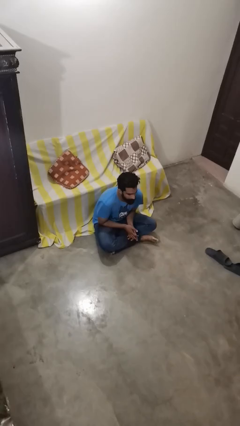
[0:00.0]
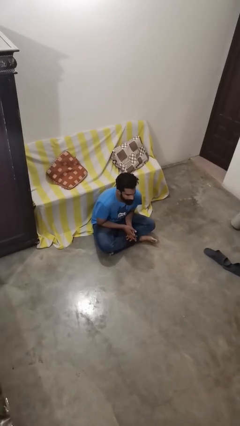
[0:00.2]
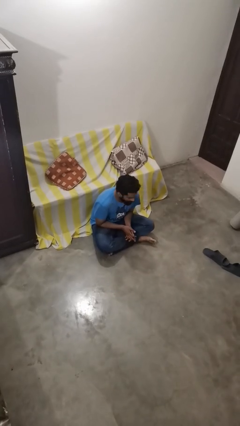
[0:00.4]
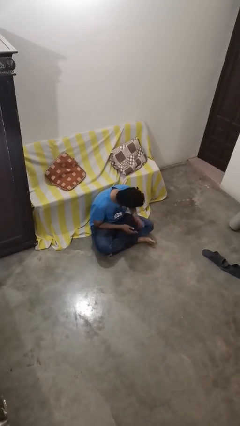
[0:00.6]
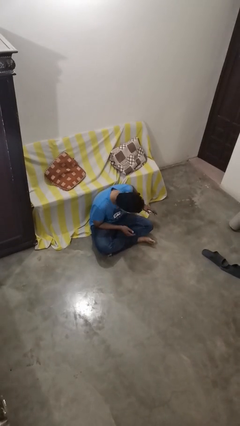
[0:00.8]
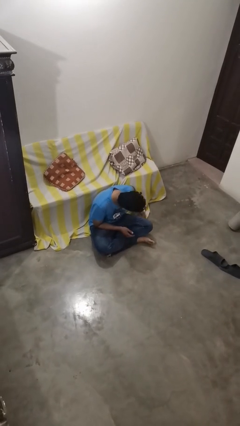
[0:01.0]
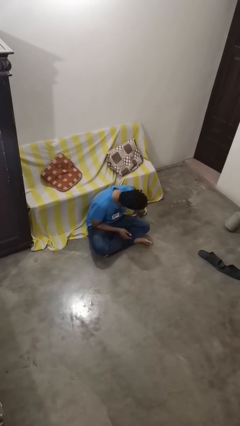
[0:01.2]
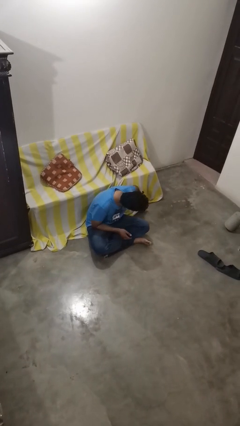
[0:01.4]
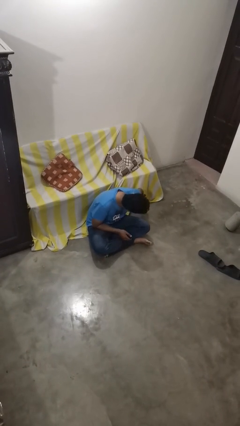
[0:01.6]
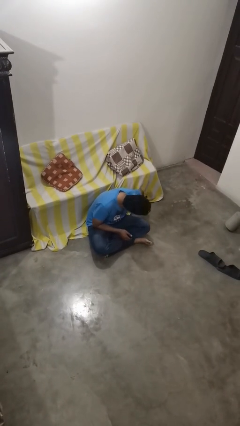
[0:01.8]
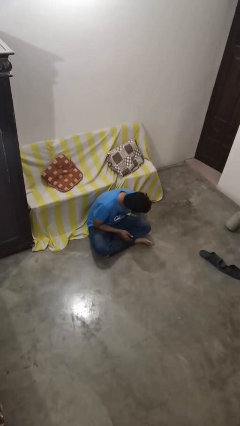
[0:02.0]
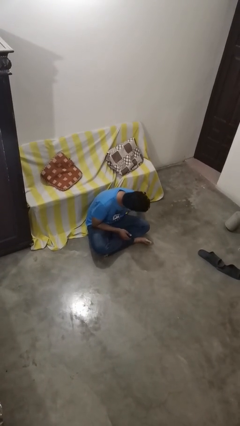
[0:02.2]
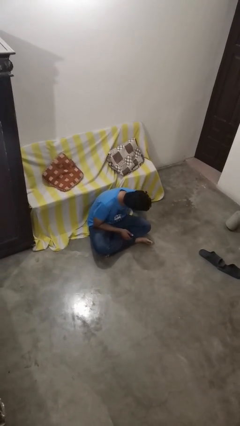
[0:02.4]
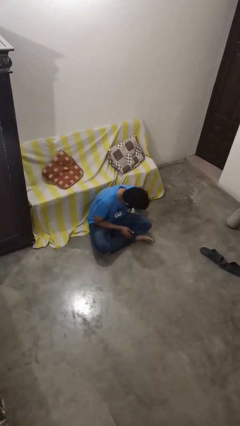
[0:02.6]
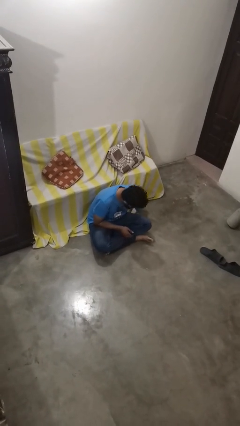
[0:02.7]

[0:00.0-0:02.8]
person searches under couch

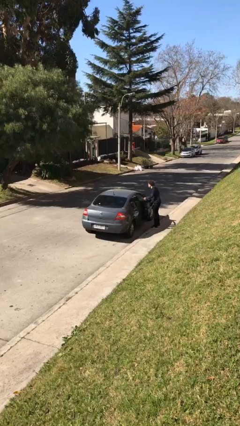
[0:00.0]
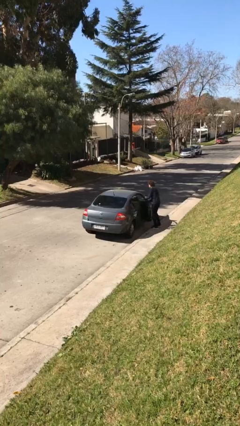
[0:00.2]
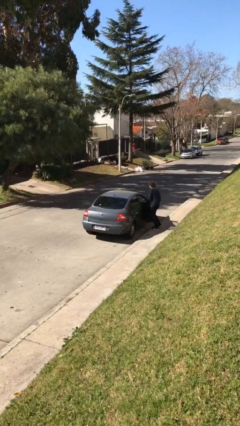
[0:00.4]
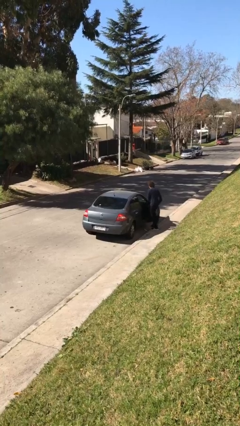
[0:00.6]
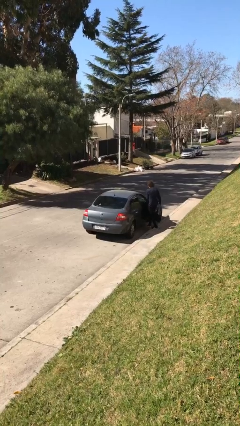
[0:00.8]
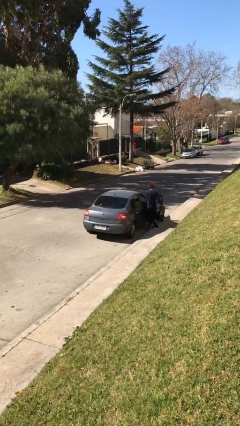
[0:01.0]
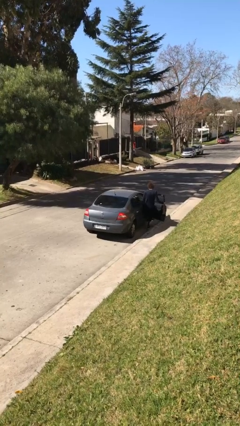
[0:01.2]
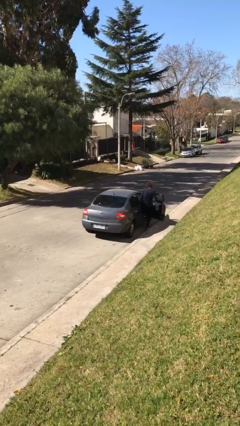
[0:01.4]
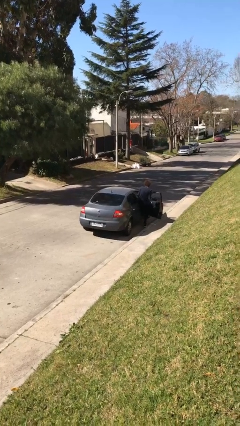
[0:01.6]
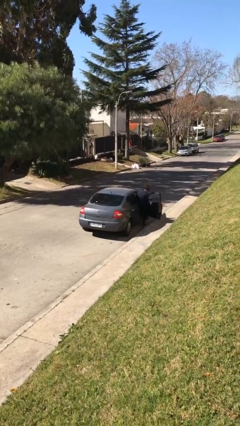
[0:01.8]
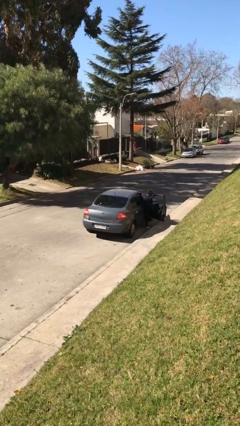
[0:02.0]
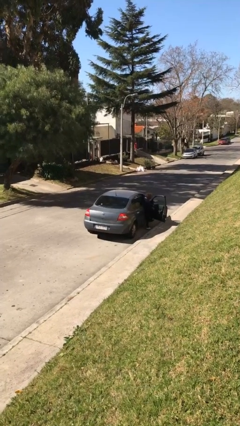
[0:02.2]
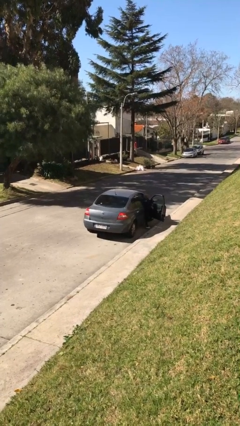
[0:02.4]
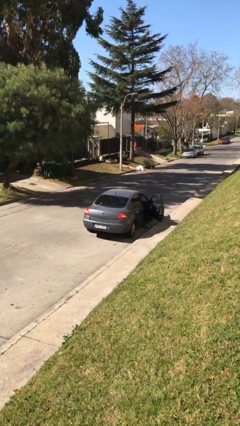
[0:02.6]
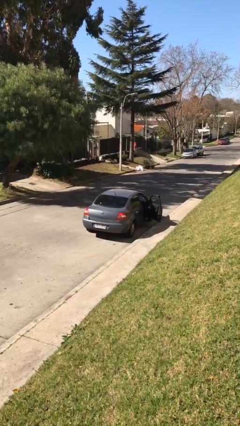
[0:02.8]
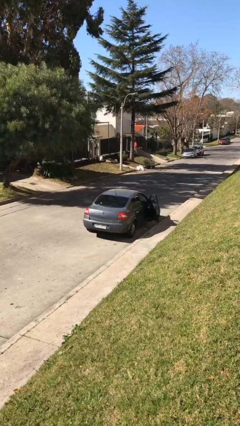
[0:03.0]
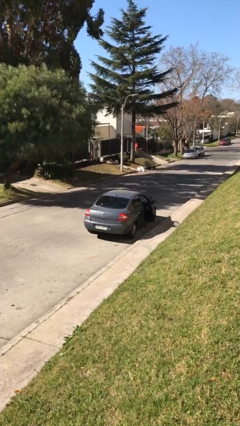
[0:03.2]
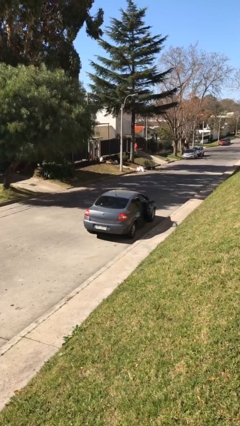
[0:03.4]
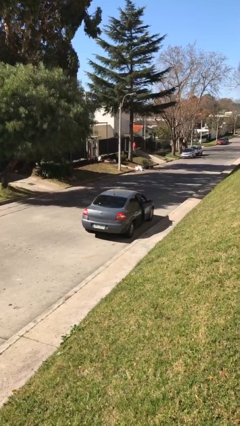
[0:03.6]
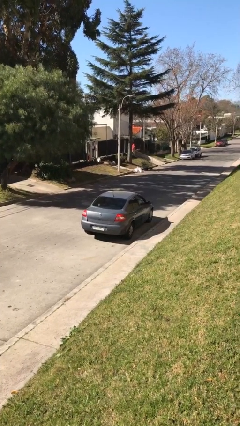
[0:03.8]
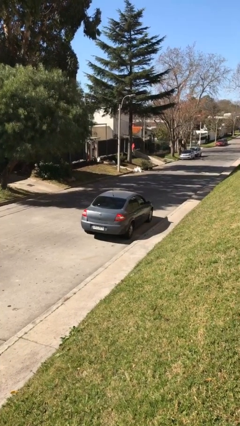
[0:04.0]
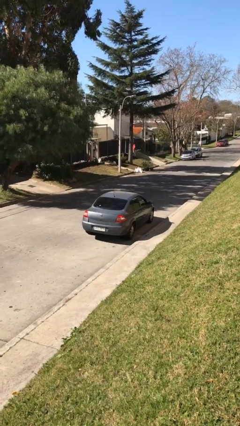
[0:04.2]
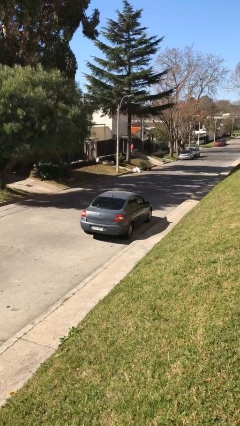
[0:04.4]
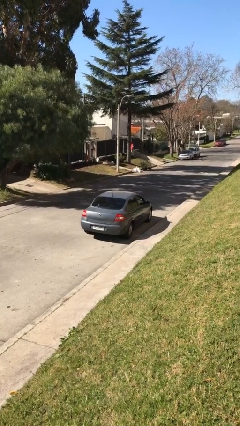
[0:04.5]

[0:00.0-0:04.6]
car picks up person

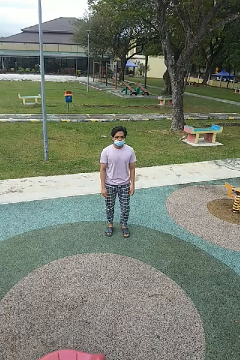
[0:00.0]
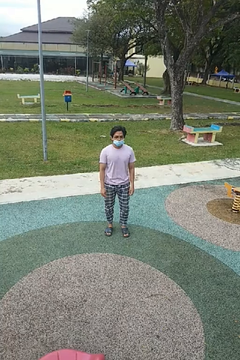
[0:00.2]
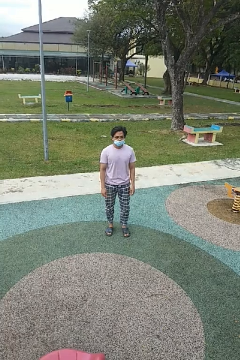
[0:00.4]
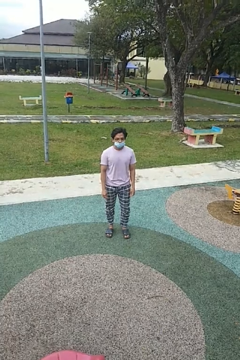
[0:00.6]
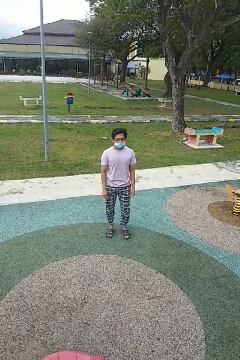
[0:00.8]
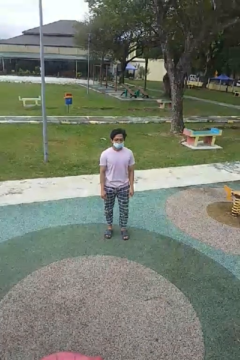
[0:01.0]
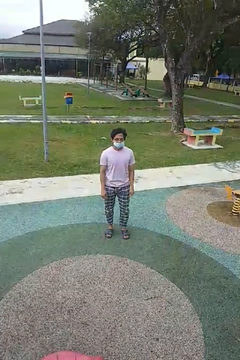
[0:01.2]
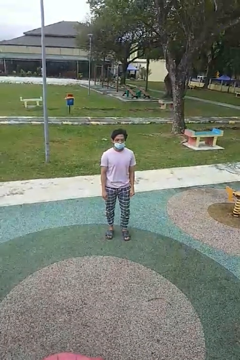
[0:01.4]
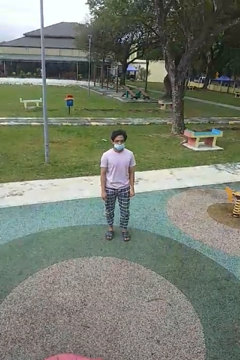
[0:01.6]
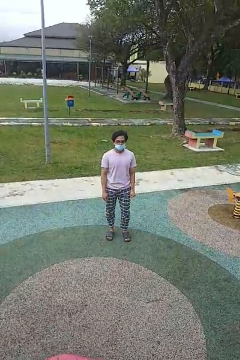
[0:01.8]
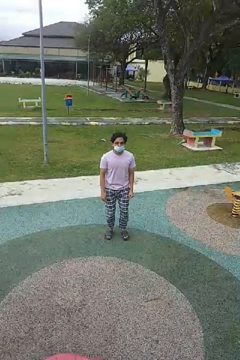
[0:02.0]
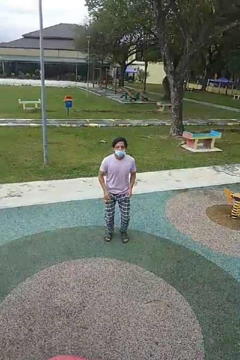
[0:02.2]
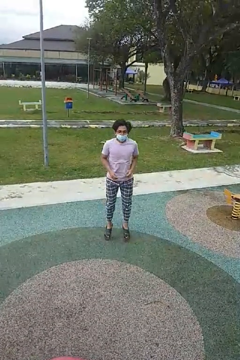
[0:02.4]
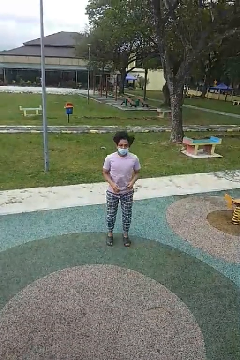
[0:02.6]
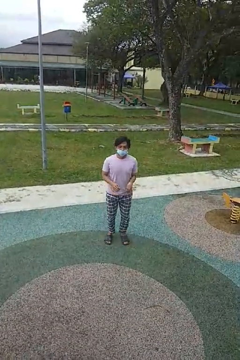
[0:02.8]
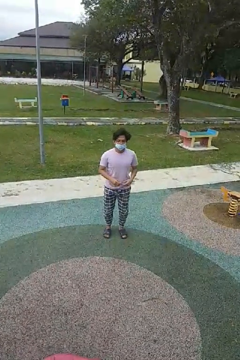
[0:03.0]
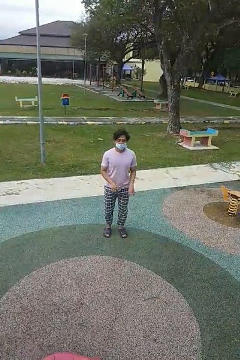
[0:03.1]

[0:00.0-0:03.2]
person jumps

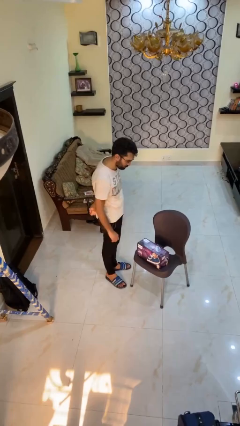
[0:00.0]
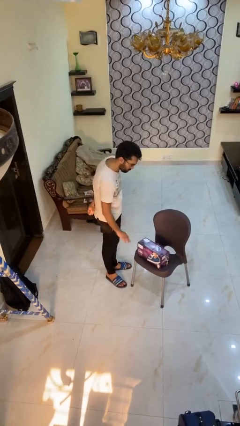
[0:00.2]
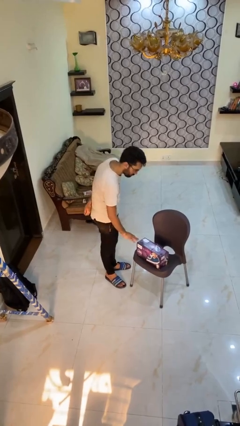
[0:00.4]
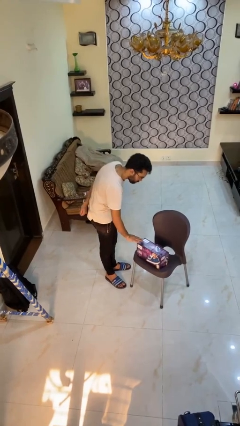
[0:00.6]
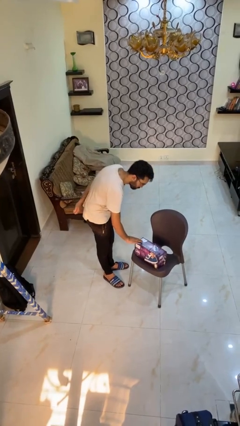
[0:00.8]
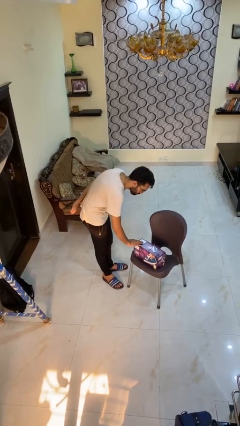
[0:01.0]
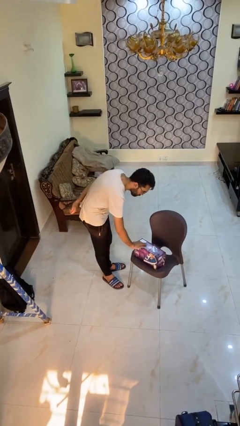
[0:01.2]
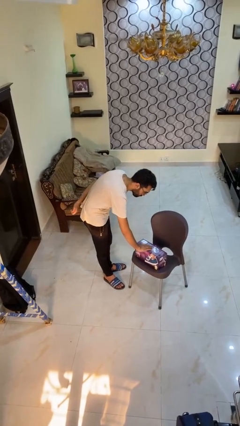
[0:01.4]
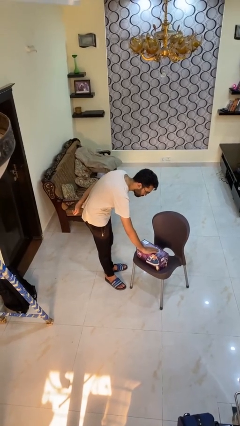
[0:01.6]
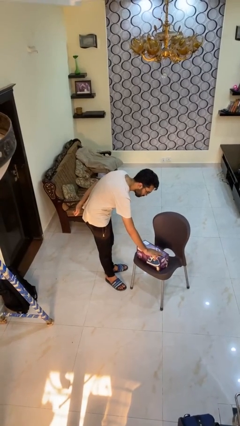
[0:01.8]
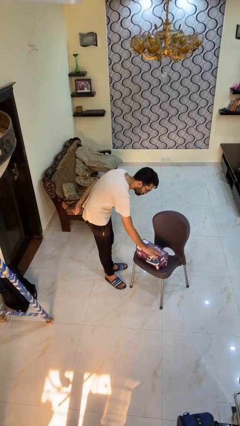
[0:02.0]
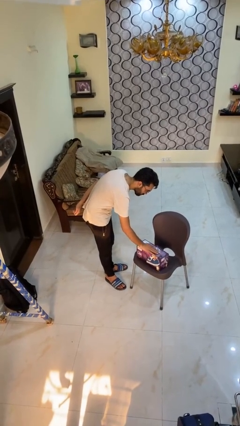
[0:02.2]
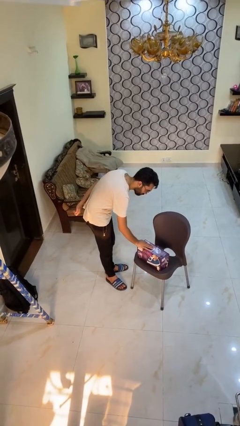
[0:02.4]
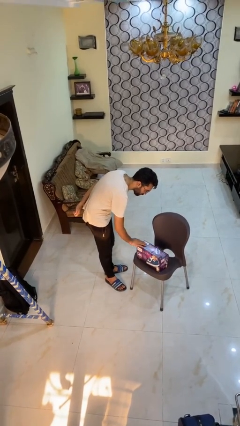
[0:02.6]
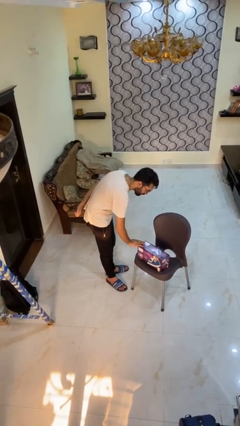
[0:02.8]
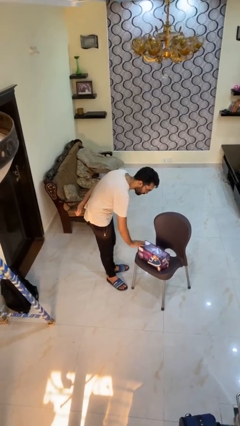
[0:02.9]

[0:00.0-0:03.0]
person waves hand over object

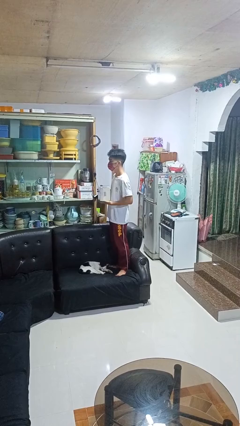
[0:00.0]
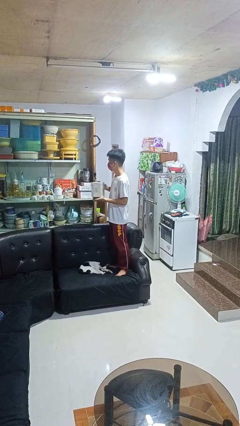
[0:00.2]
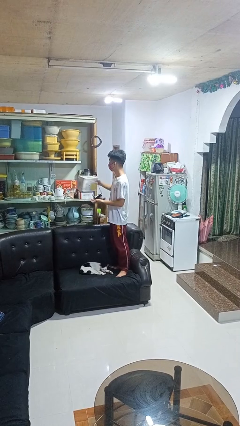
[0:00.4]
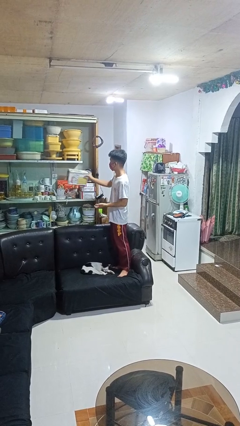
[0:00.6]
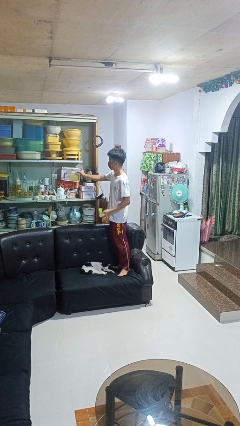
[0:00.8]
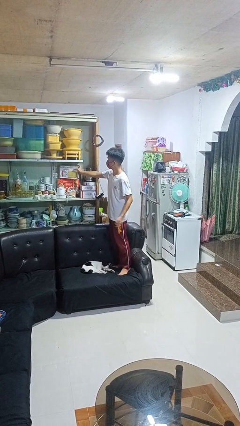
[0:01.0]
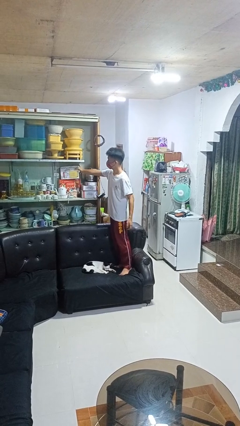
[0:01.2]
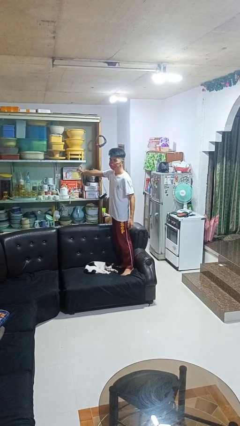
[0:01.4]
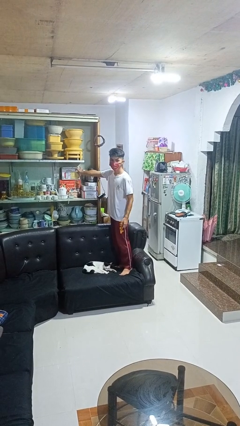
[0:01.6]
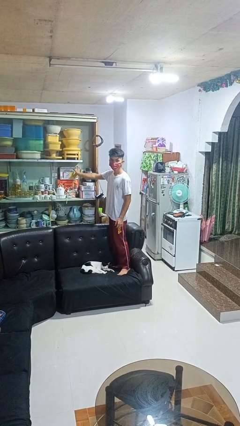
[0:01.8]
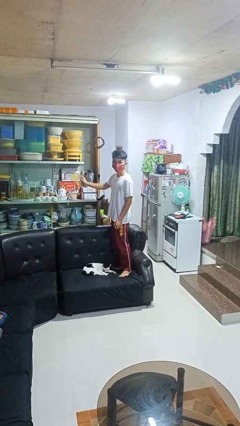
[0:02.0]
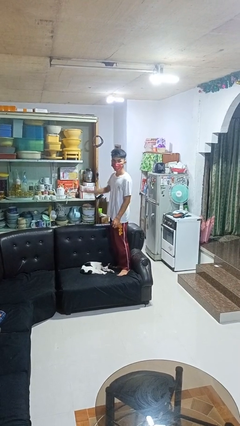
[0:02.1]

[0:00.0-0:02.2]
person puts down object into cabinet

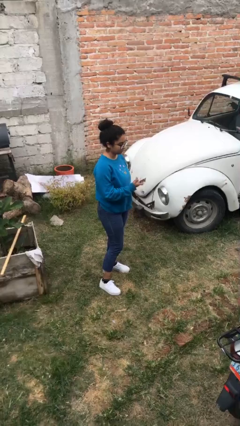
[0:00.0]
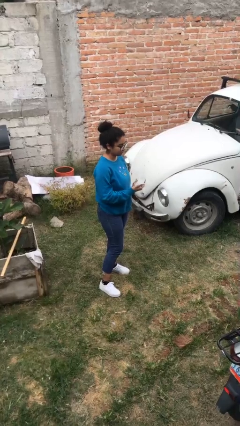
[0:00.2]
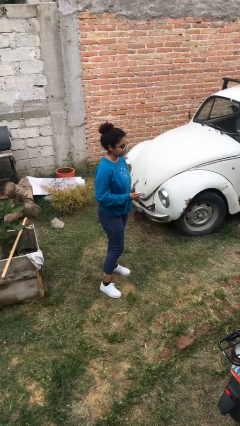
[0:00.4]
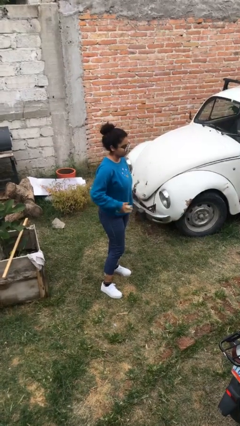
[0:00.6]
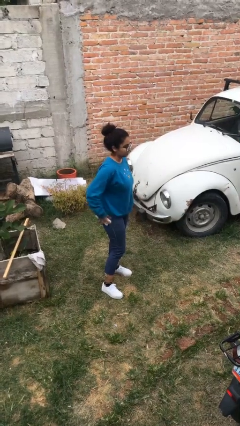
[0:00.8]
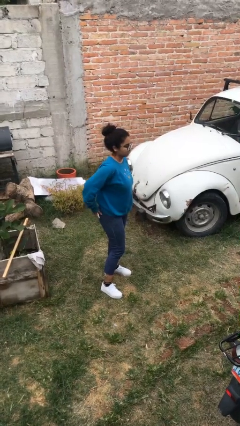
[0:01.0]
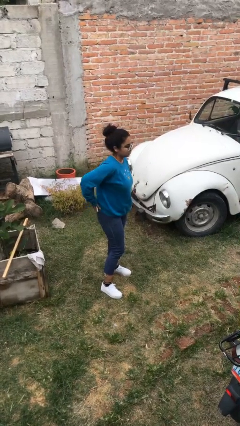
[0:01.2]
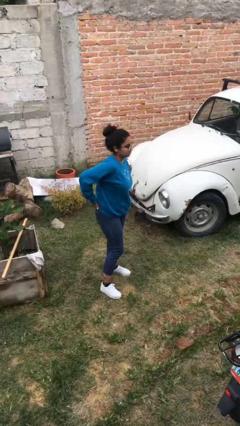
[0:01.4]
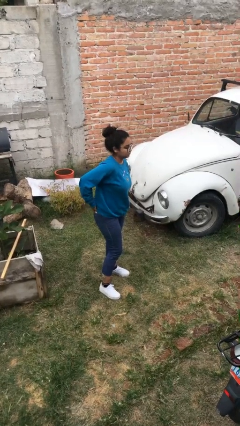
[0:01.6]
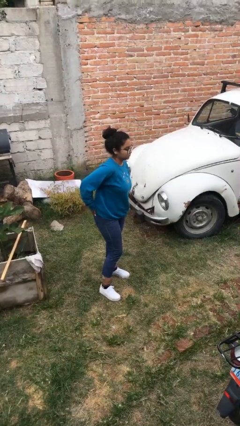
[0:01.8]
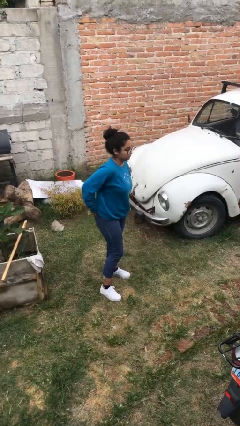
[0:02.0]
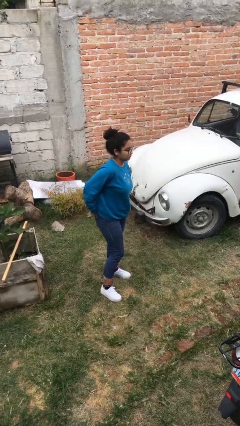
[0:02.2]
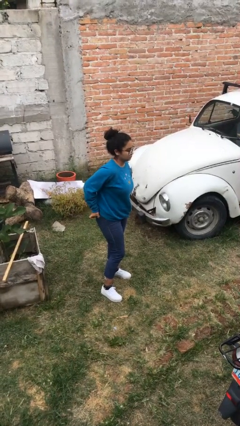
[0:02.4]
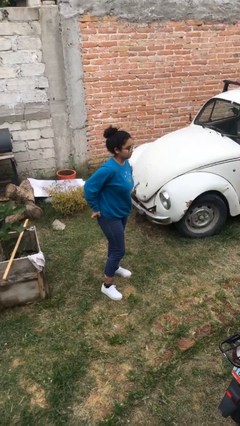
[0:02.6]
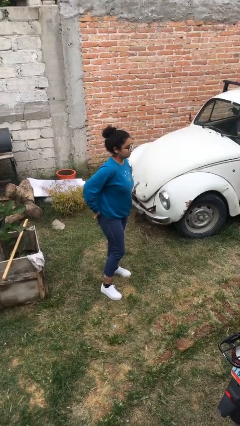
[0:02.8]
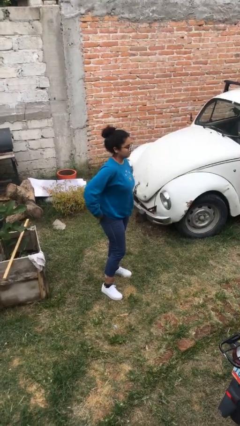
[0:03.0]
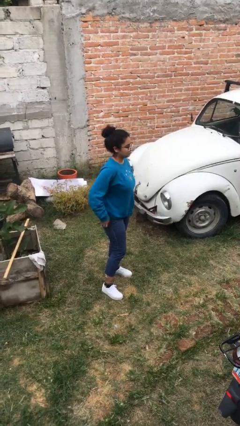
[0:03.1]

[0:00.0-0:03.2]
person puts phone into pocket
